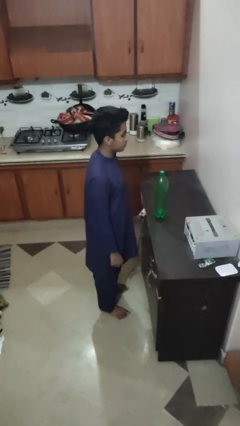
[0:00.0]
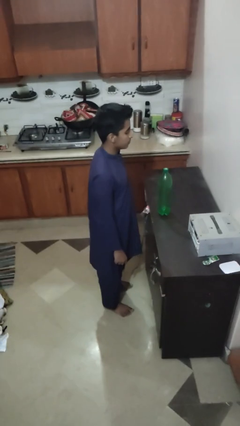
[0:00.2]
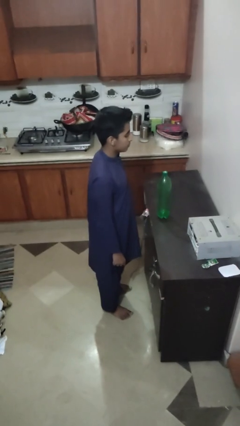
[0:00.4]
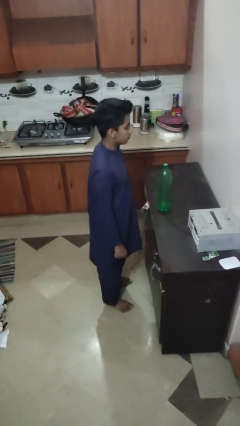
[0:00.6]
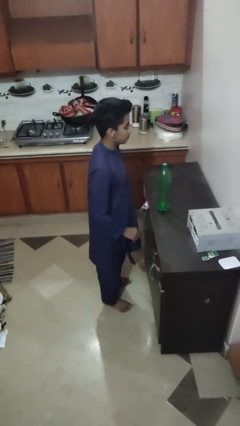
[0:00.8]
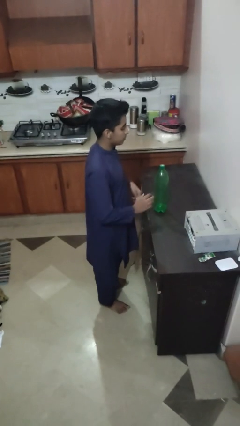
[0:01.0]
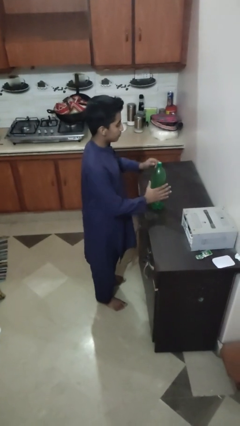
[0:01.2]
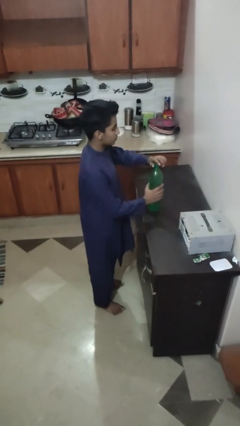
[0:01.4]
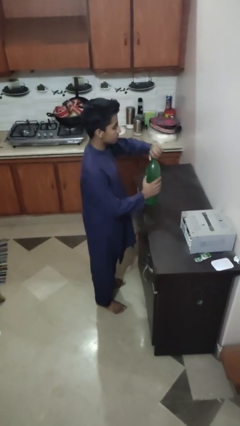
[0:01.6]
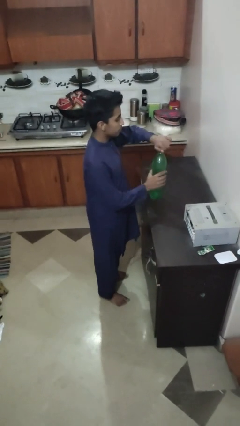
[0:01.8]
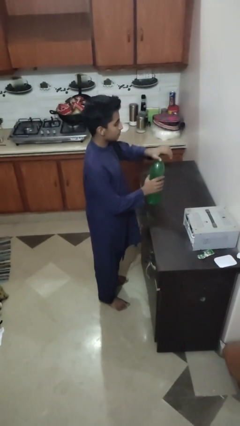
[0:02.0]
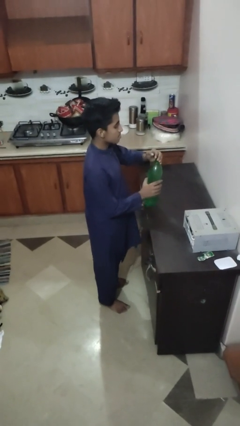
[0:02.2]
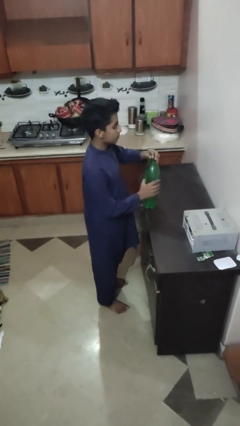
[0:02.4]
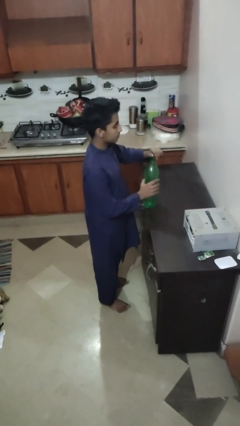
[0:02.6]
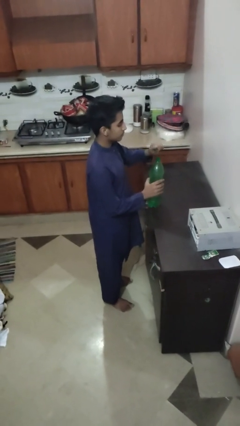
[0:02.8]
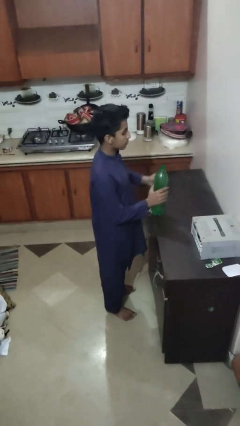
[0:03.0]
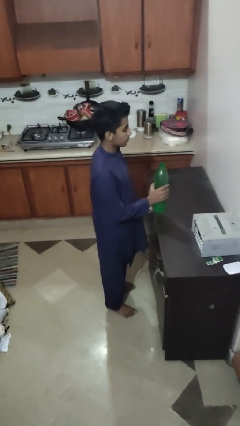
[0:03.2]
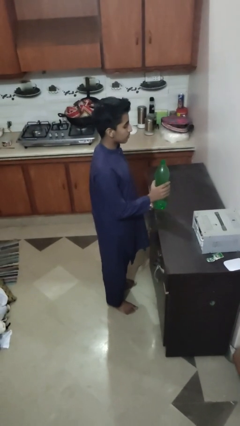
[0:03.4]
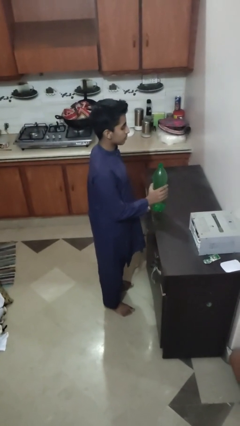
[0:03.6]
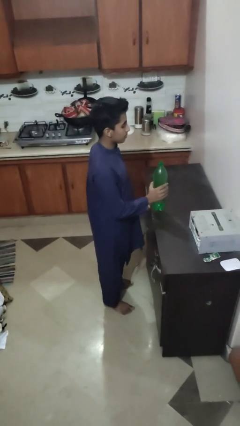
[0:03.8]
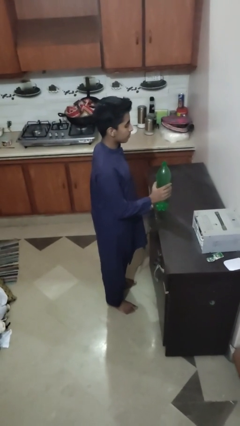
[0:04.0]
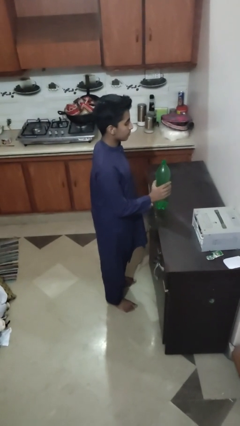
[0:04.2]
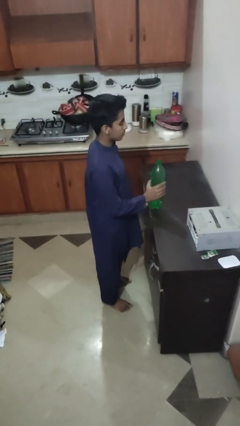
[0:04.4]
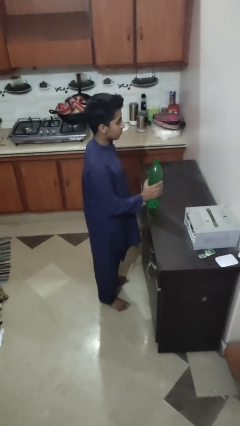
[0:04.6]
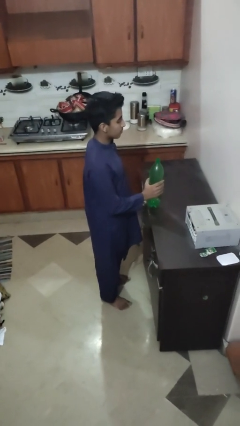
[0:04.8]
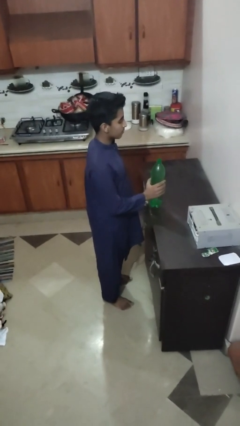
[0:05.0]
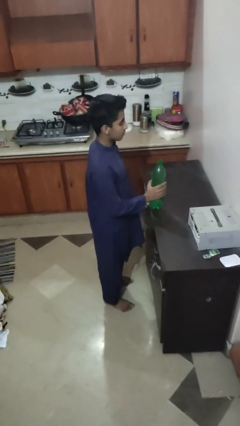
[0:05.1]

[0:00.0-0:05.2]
person unscrews lid from bottle

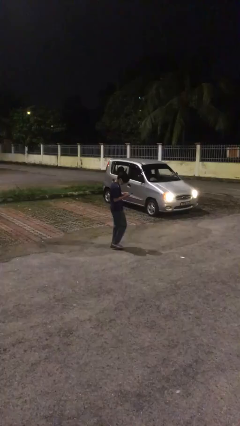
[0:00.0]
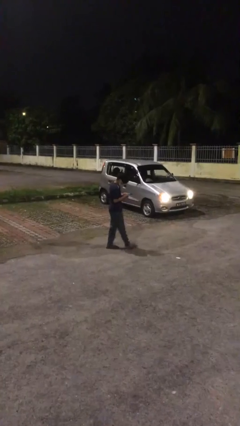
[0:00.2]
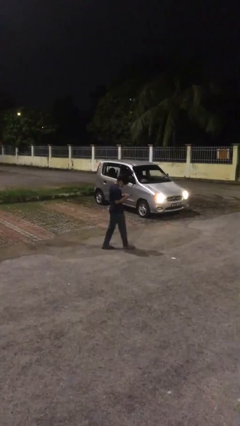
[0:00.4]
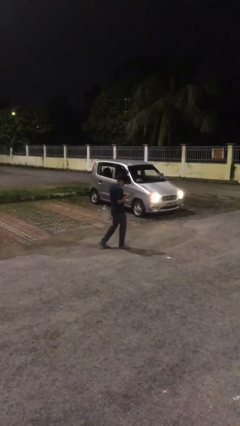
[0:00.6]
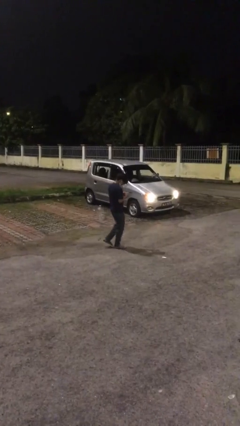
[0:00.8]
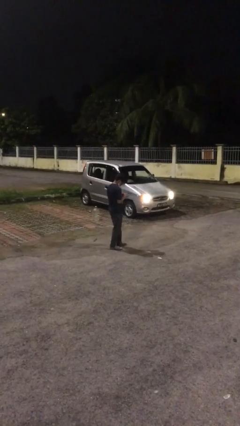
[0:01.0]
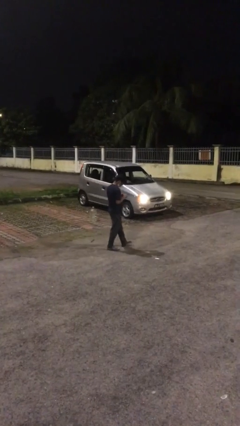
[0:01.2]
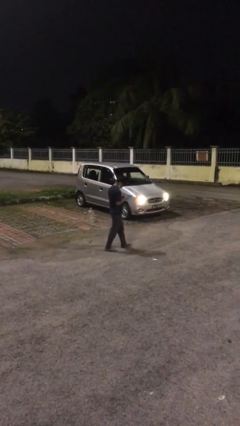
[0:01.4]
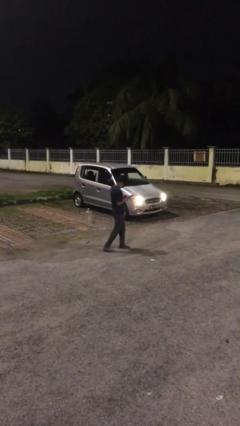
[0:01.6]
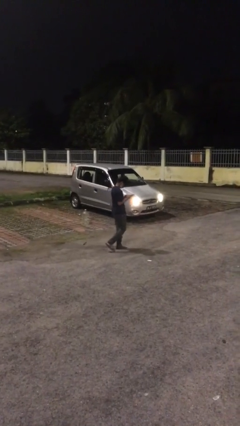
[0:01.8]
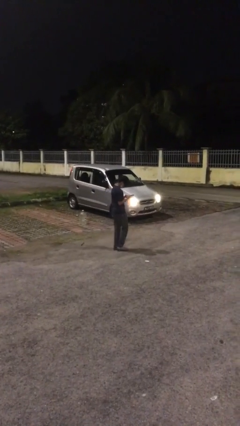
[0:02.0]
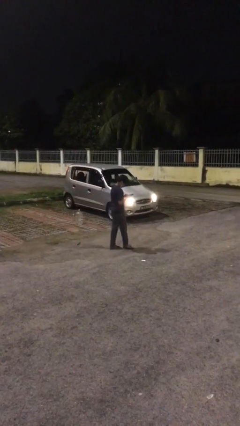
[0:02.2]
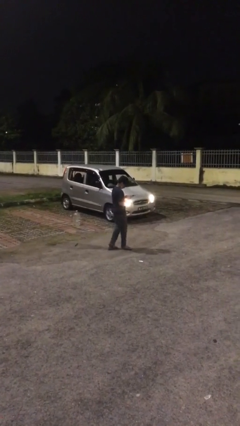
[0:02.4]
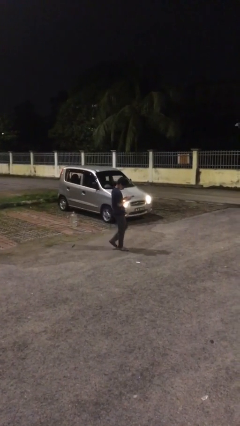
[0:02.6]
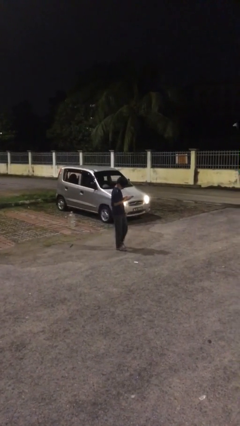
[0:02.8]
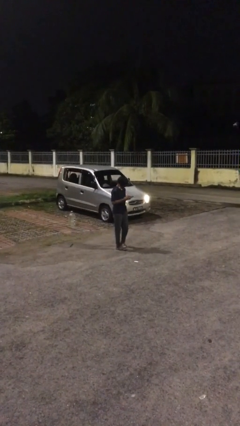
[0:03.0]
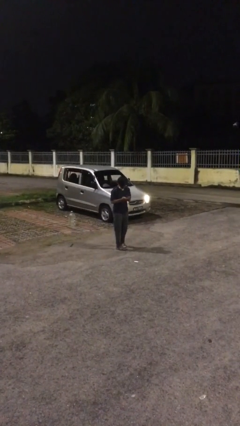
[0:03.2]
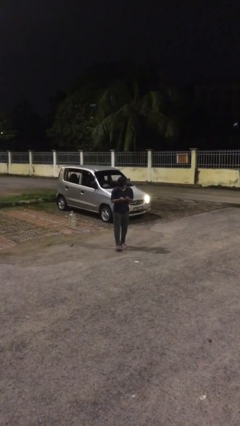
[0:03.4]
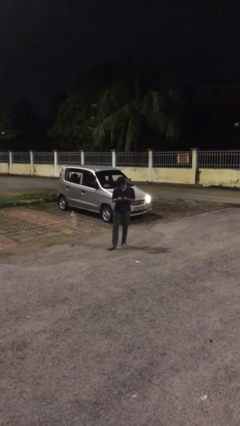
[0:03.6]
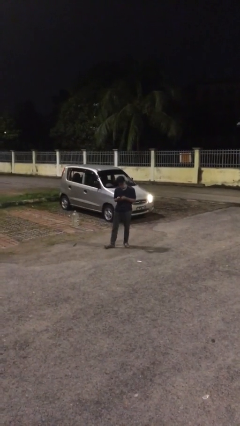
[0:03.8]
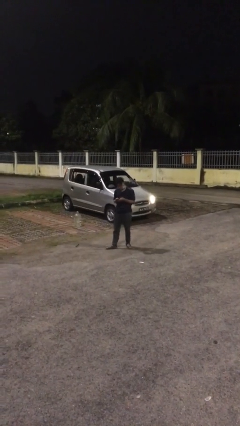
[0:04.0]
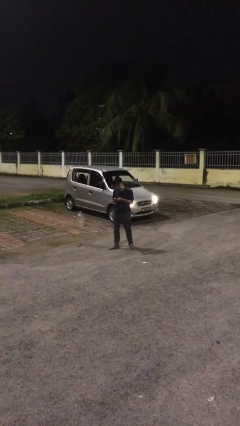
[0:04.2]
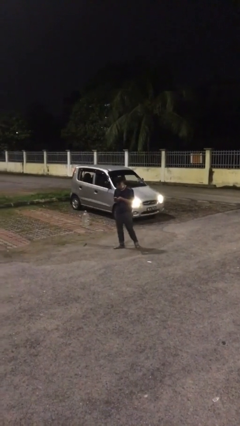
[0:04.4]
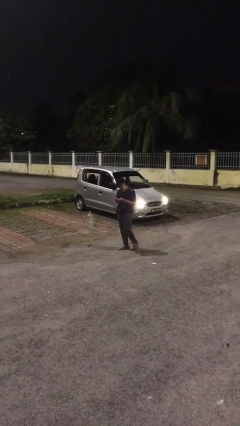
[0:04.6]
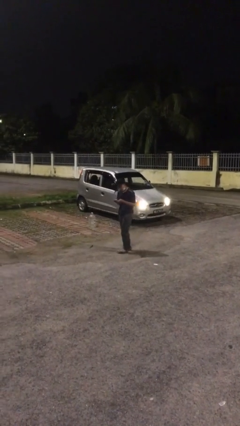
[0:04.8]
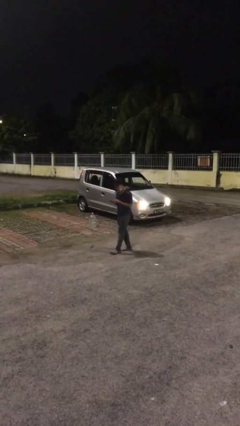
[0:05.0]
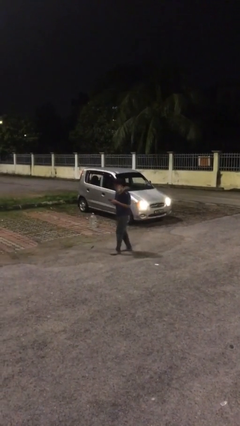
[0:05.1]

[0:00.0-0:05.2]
person texts on phone

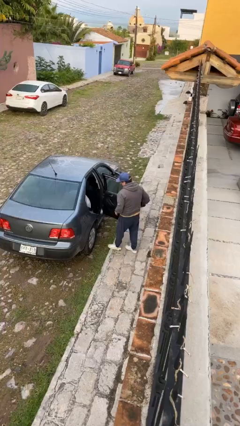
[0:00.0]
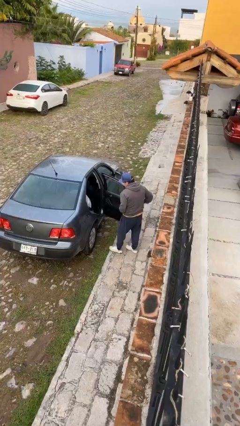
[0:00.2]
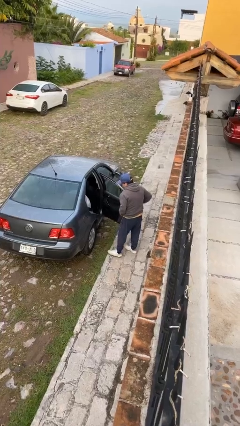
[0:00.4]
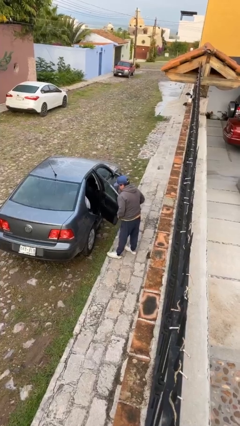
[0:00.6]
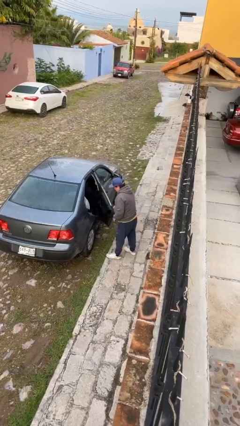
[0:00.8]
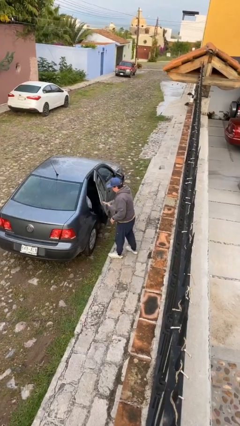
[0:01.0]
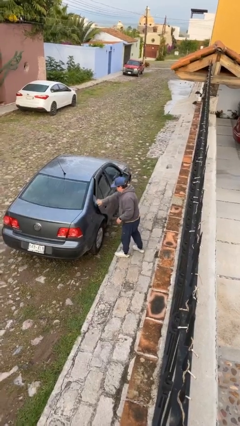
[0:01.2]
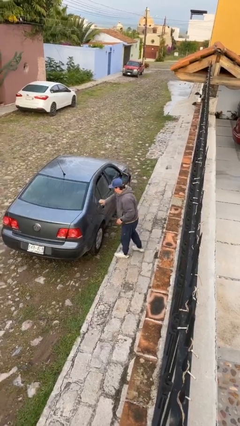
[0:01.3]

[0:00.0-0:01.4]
person closes car door

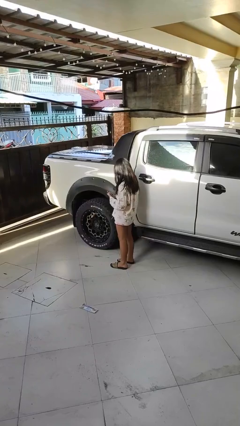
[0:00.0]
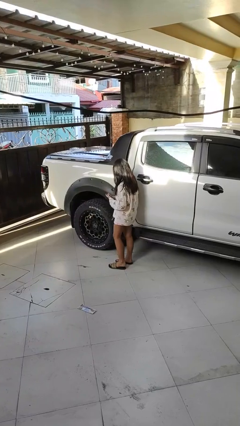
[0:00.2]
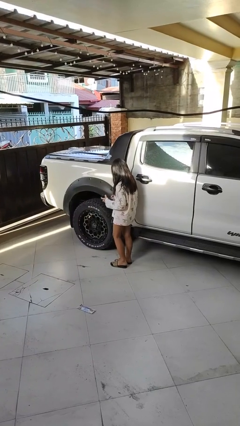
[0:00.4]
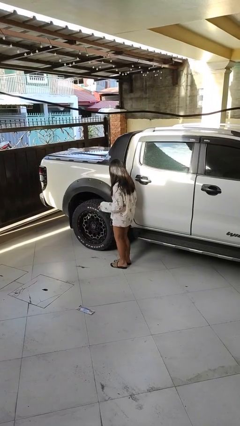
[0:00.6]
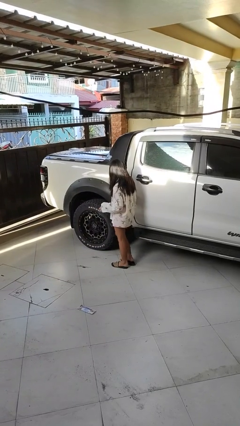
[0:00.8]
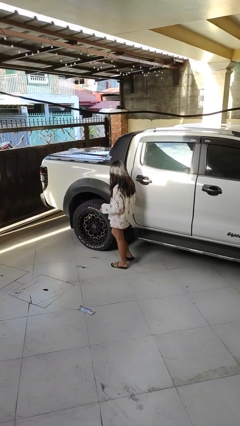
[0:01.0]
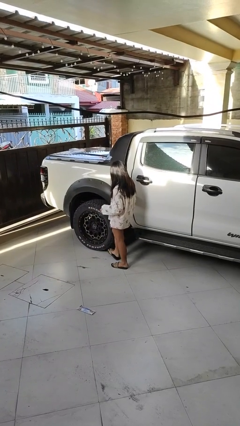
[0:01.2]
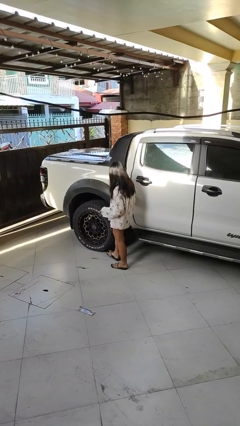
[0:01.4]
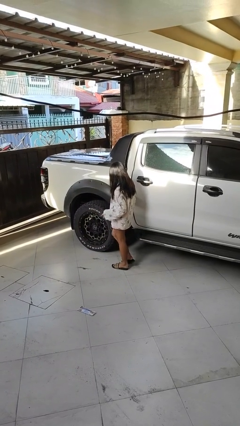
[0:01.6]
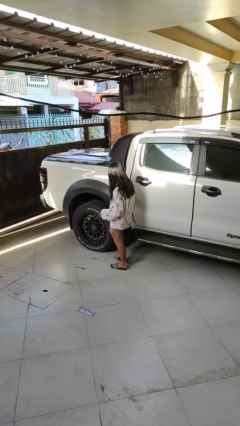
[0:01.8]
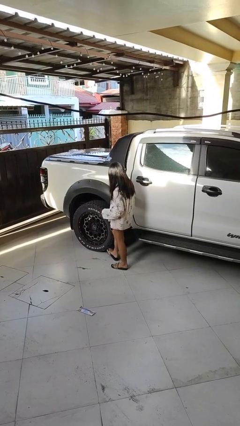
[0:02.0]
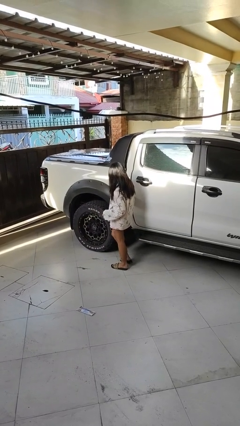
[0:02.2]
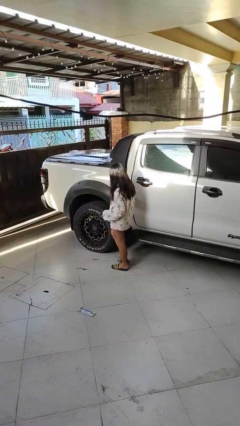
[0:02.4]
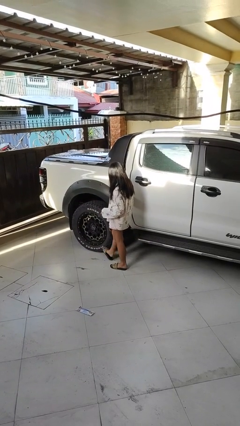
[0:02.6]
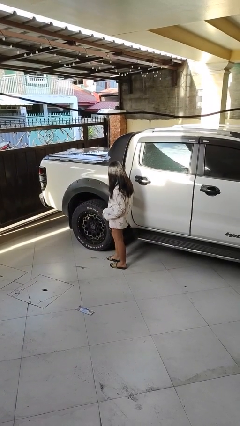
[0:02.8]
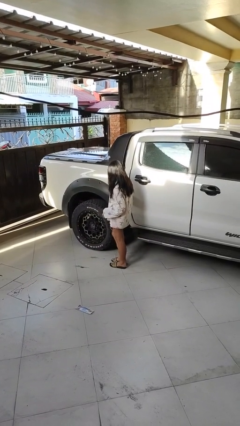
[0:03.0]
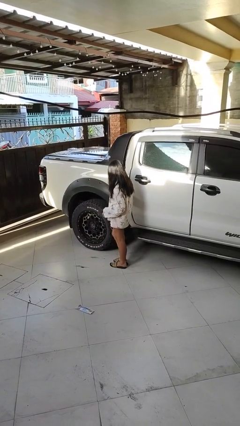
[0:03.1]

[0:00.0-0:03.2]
person kicks car tires

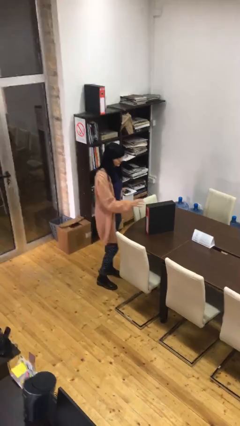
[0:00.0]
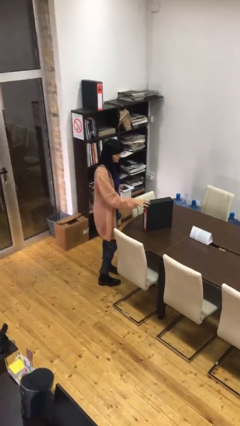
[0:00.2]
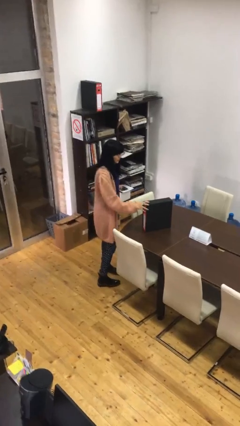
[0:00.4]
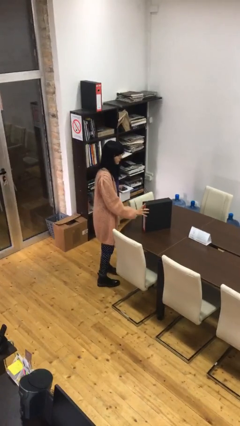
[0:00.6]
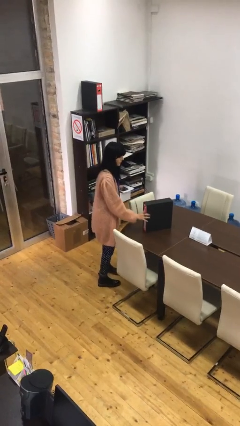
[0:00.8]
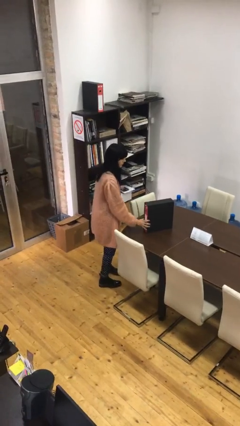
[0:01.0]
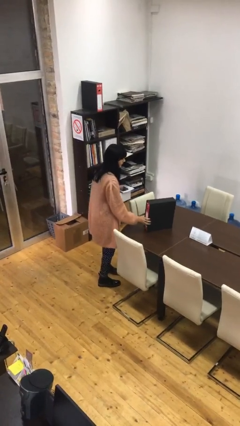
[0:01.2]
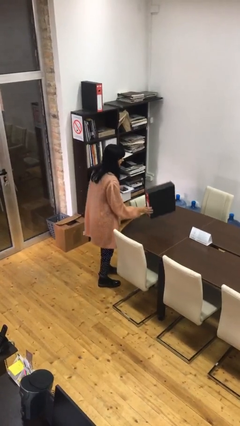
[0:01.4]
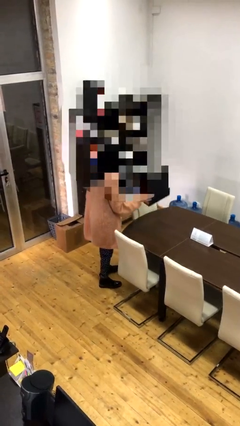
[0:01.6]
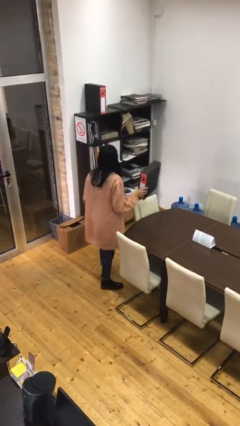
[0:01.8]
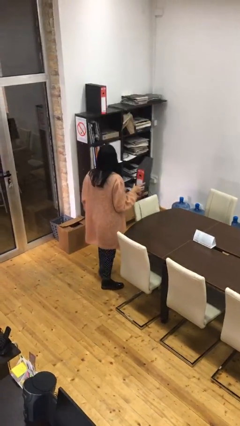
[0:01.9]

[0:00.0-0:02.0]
person picks up object from table

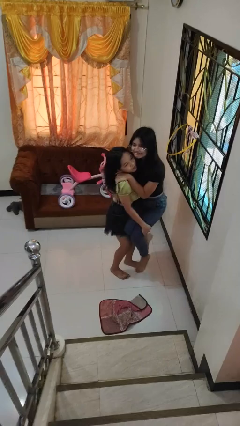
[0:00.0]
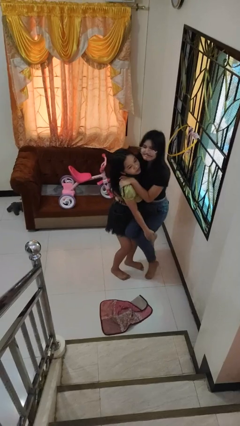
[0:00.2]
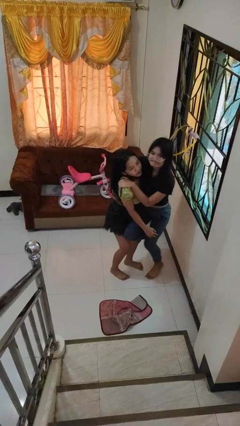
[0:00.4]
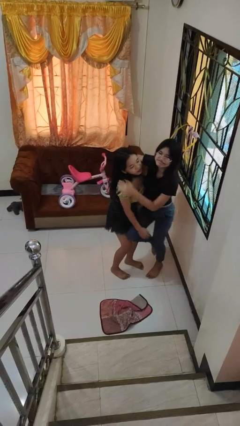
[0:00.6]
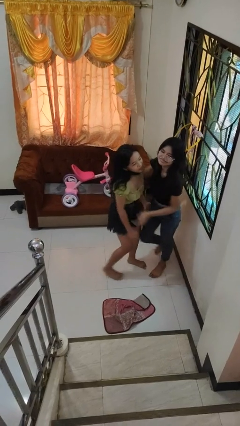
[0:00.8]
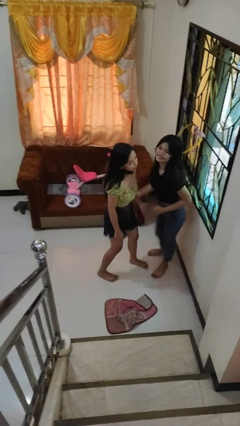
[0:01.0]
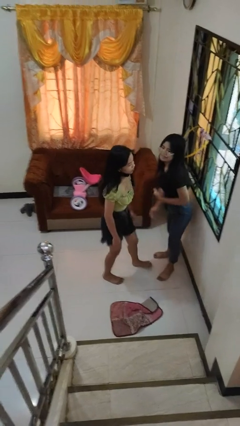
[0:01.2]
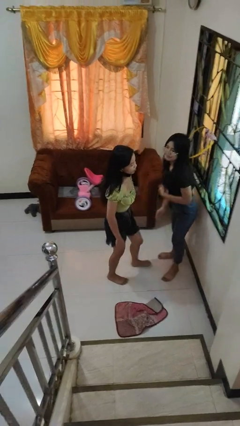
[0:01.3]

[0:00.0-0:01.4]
person puts down person
